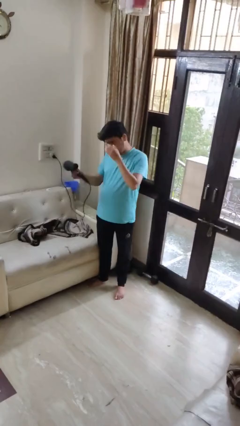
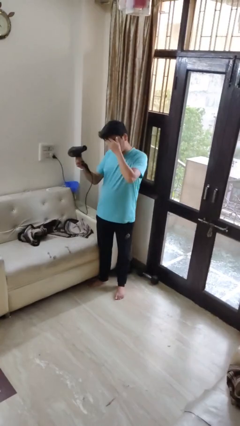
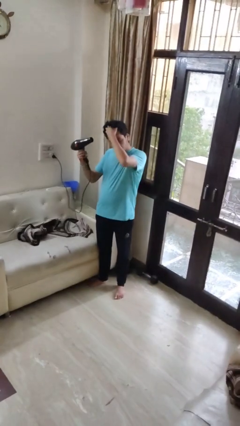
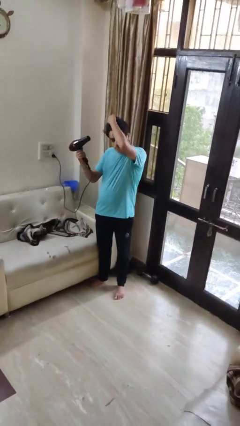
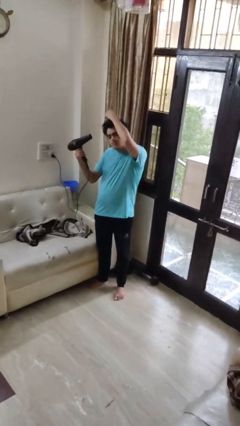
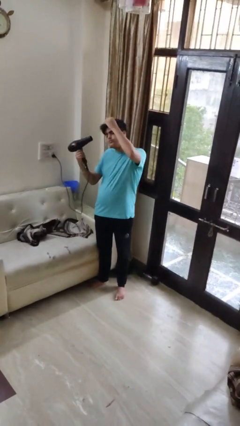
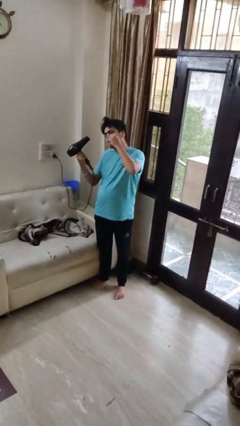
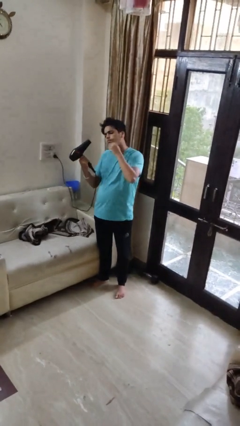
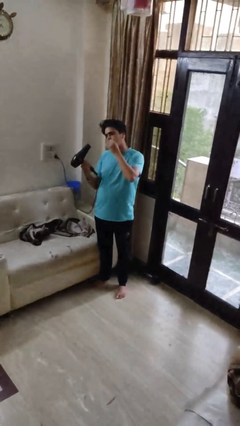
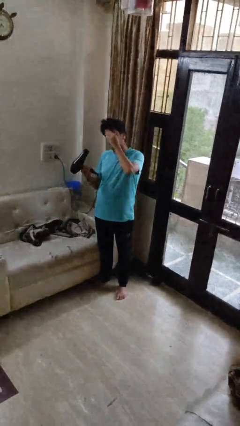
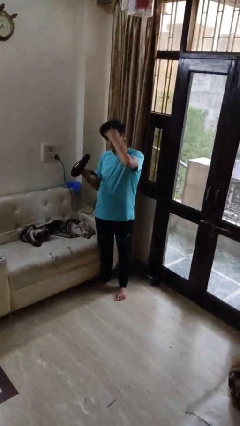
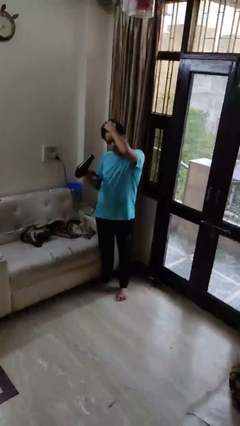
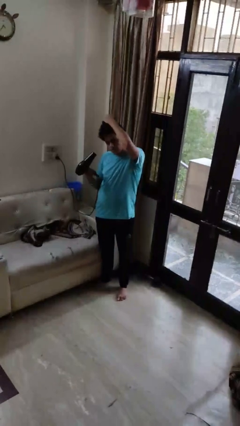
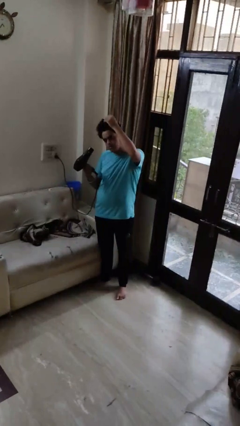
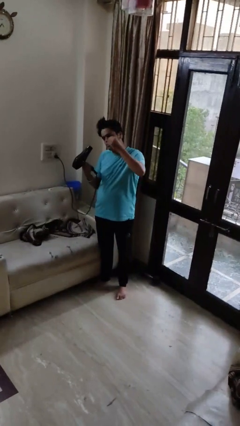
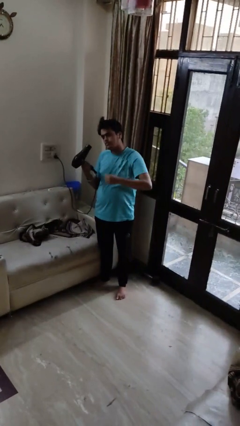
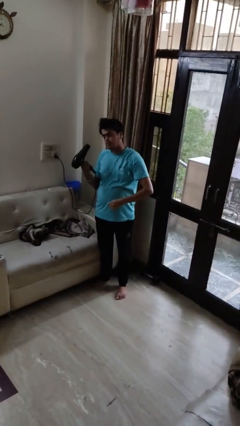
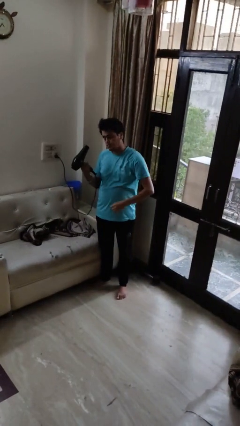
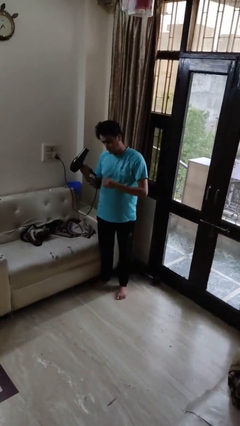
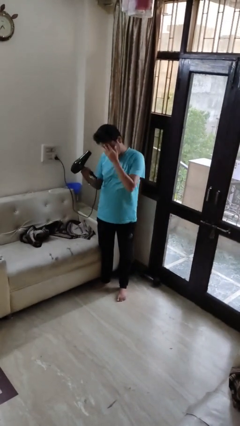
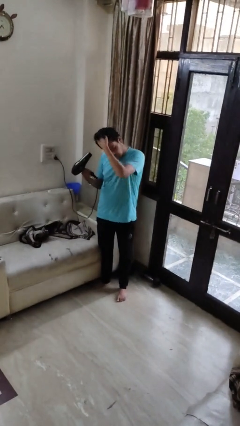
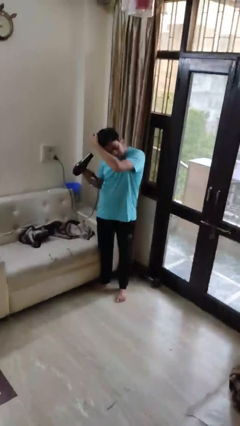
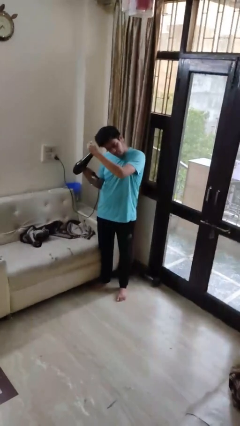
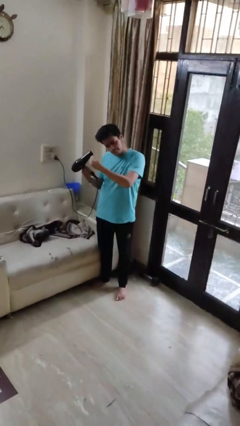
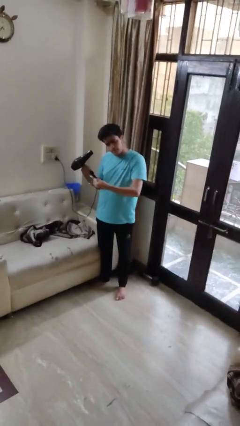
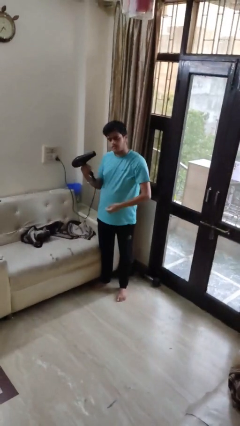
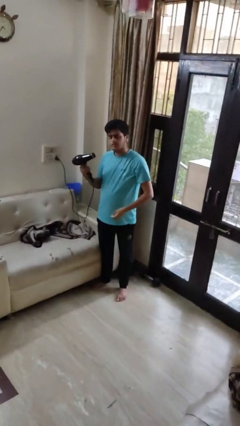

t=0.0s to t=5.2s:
person dries hair with hairdryer

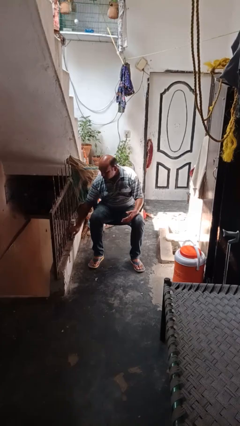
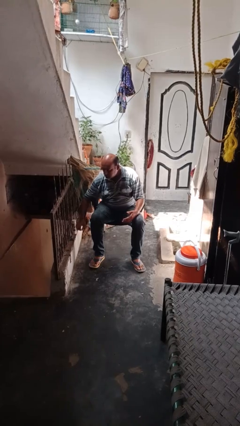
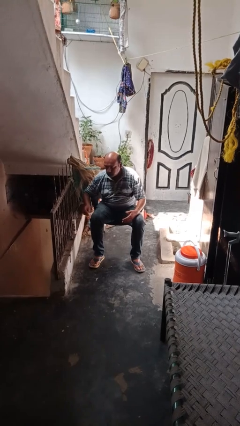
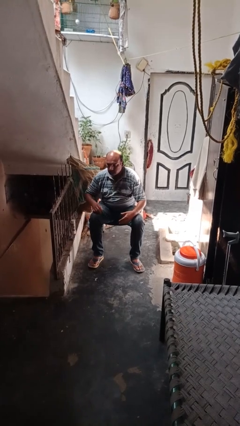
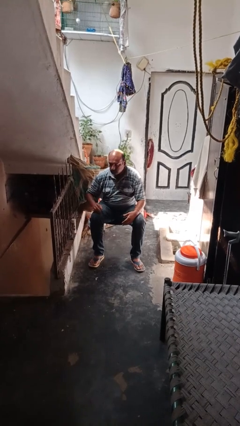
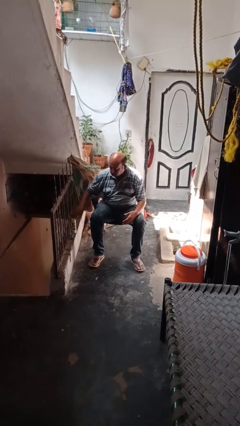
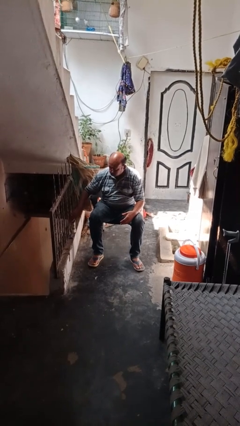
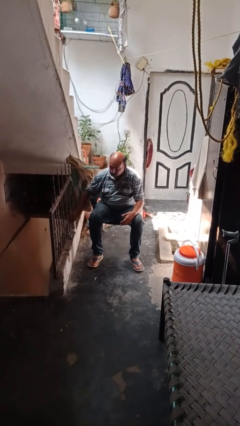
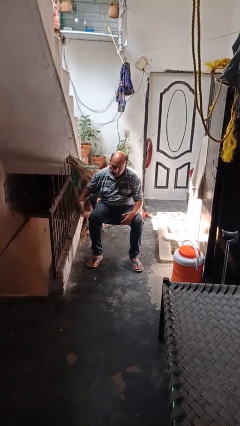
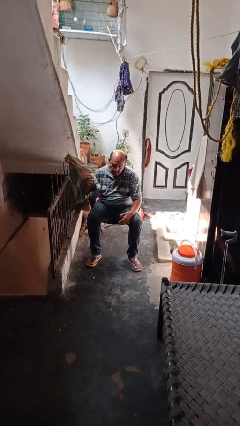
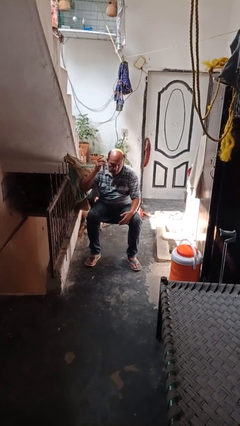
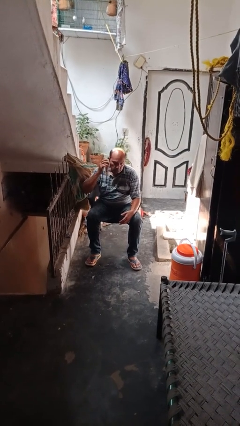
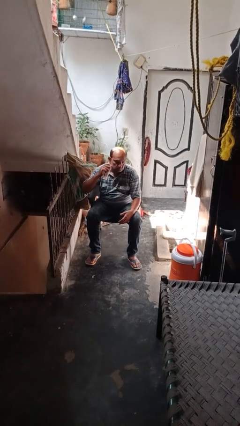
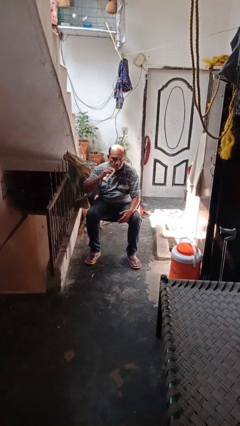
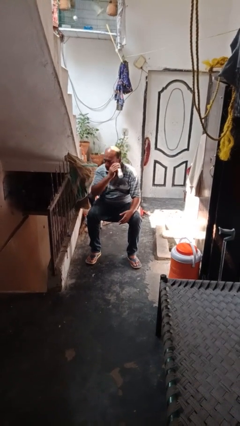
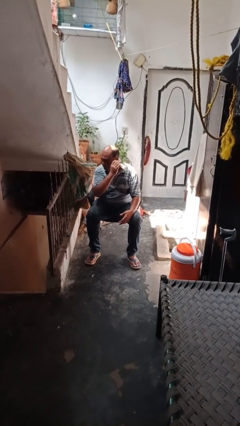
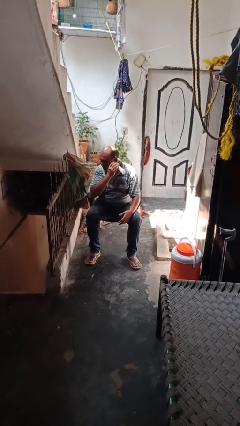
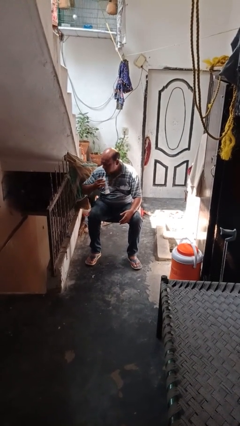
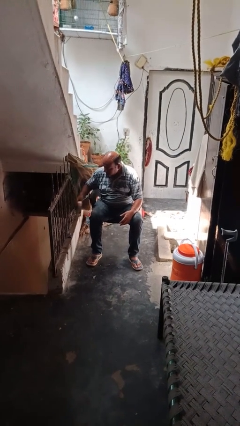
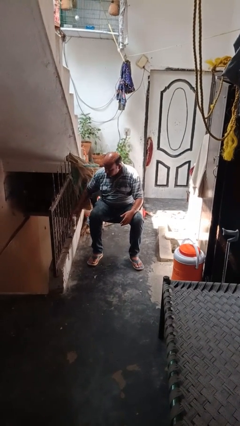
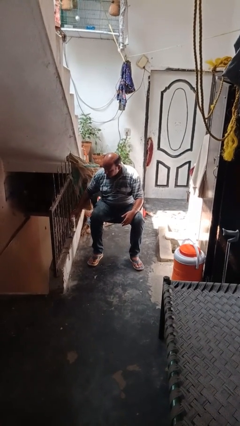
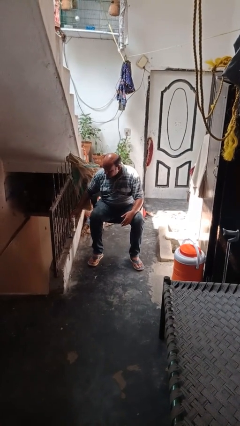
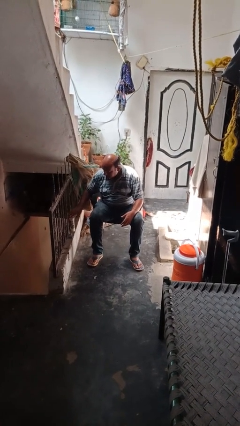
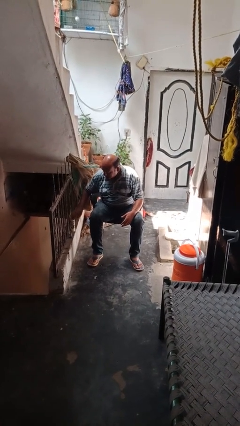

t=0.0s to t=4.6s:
person applies shaving cream

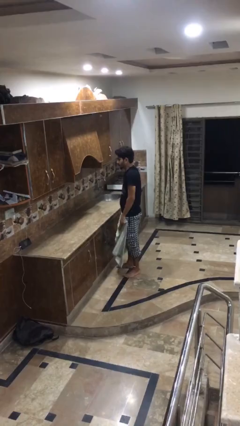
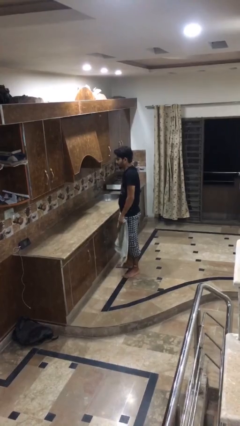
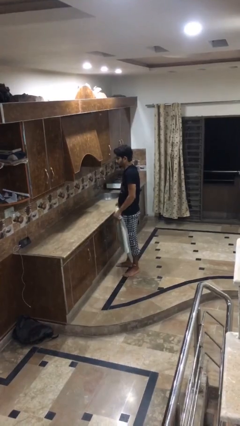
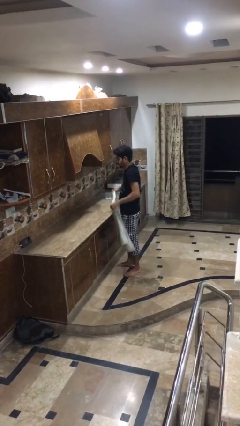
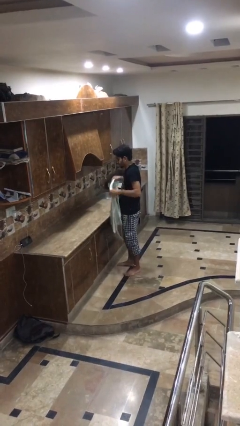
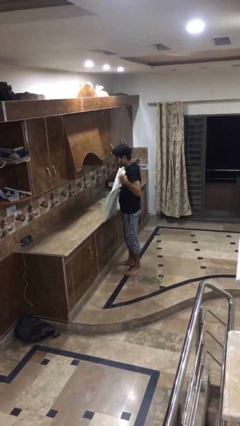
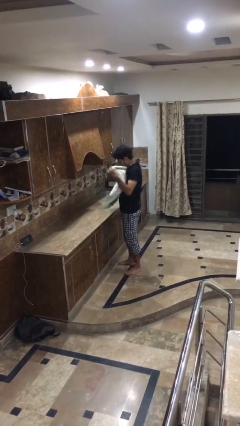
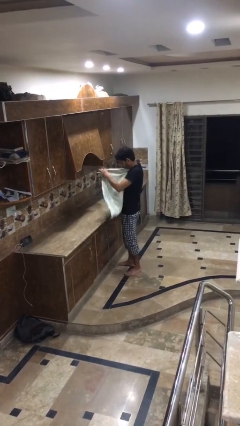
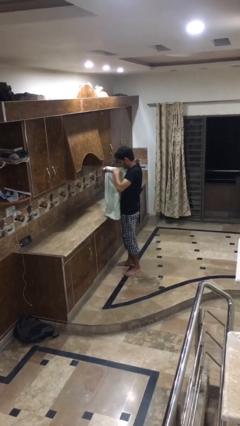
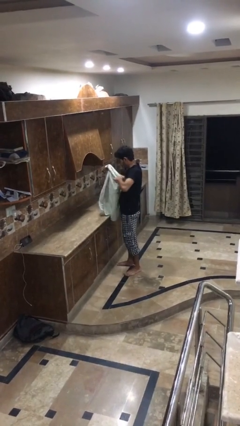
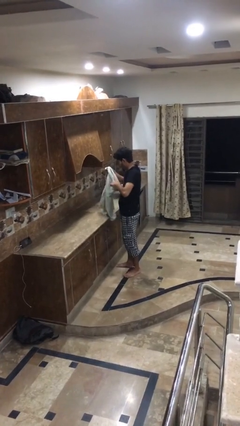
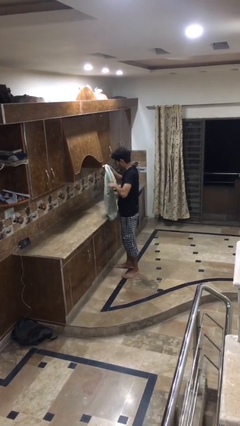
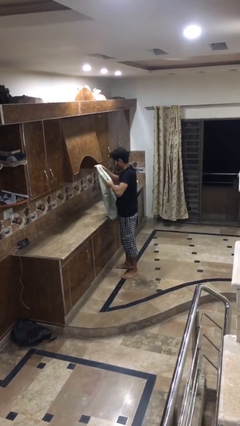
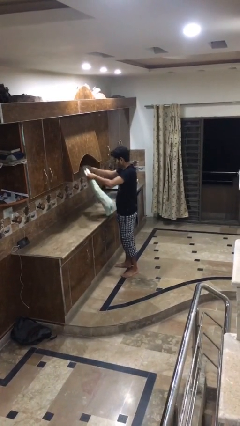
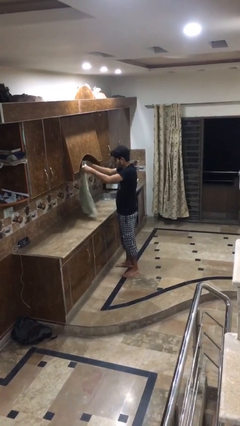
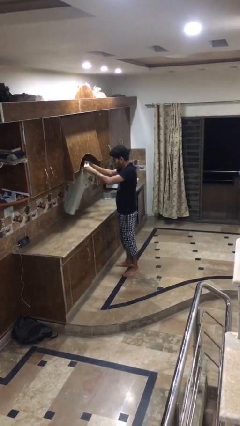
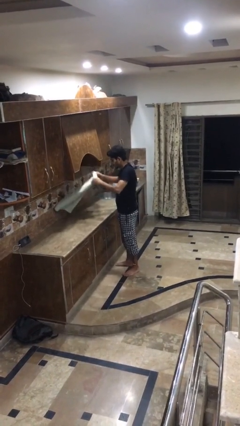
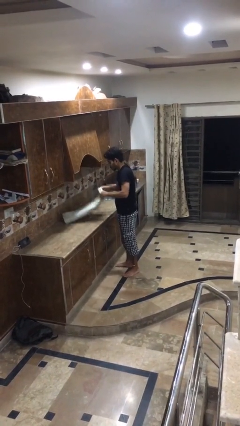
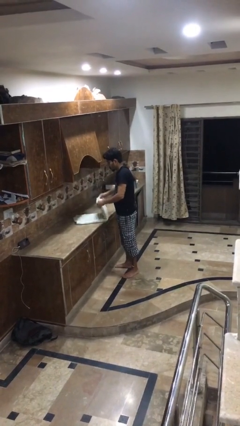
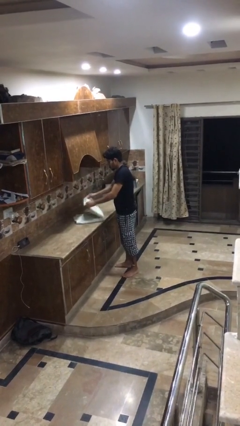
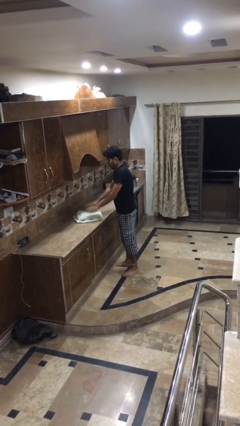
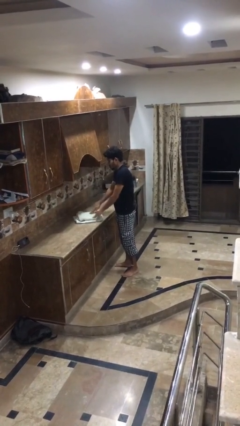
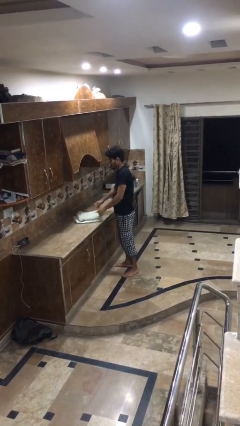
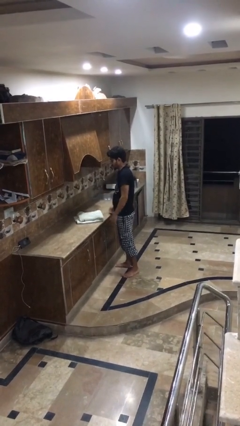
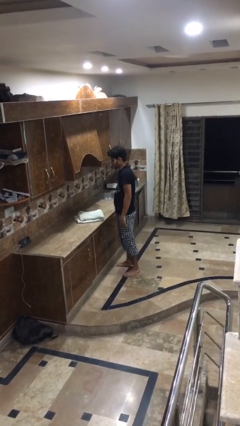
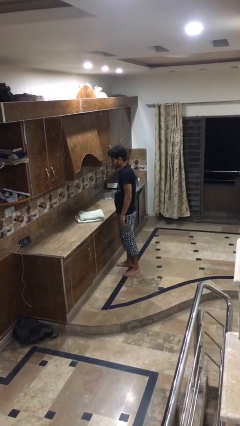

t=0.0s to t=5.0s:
person folds towel

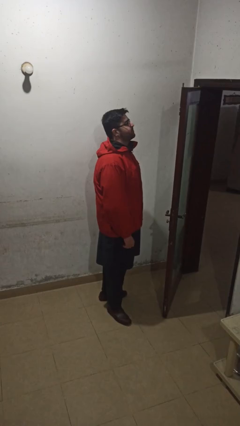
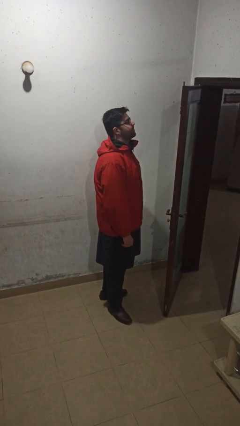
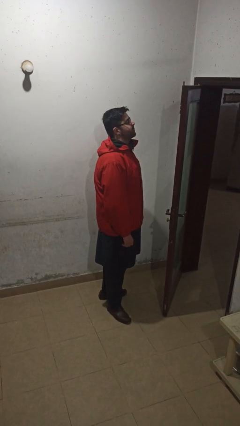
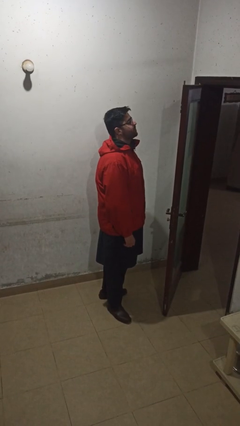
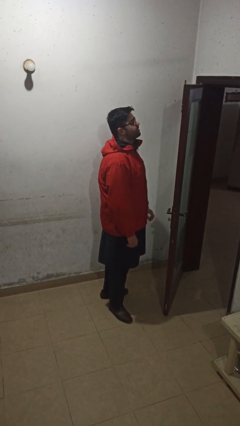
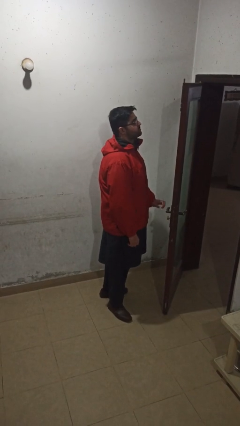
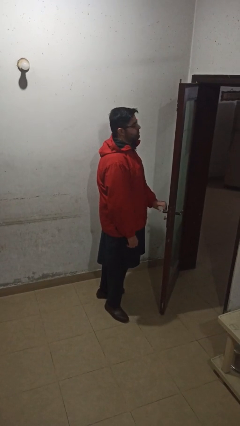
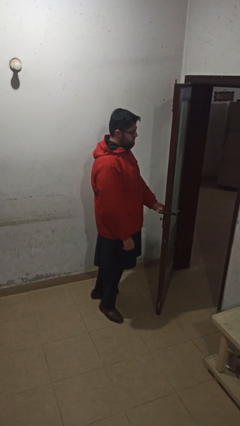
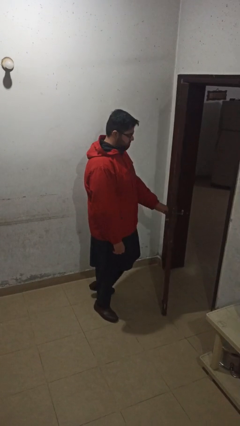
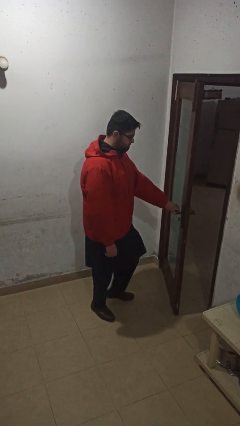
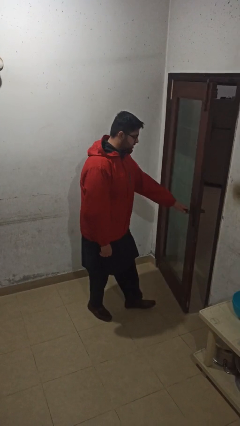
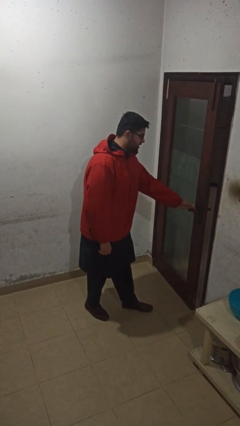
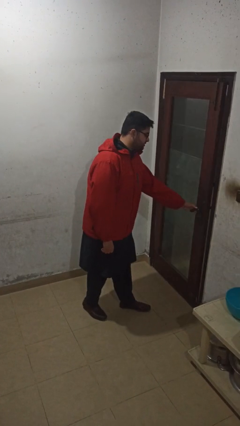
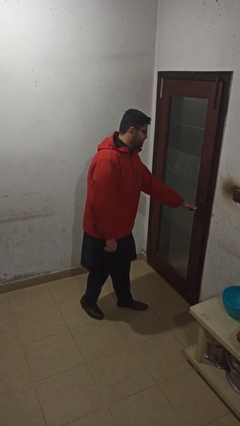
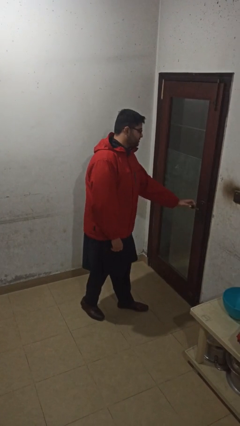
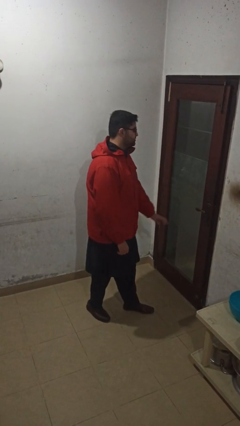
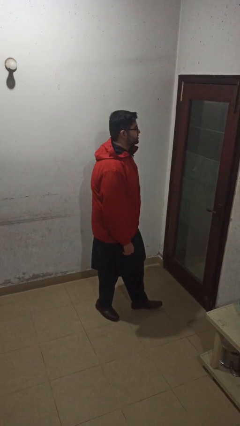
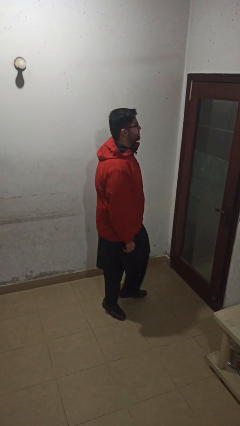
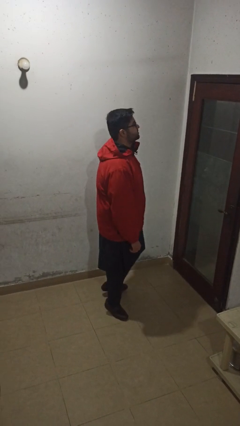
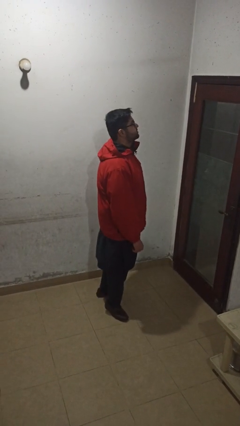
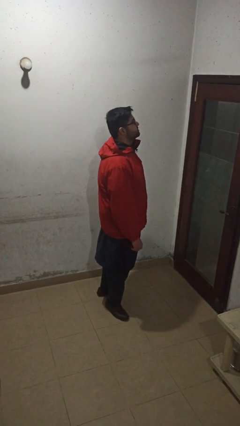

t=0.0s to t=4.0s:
person closes facility door
